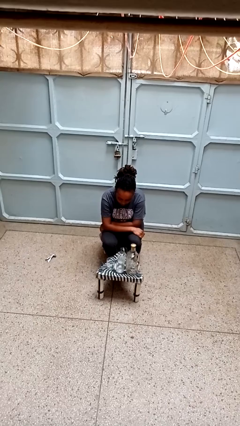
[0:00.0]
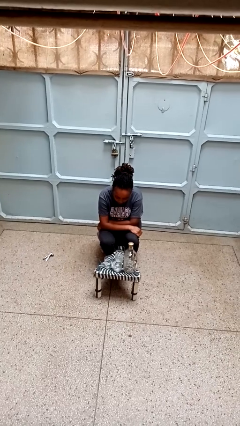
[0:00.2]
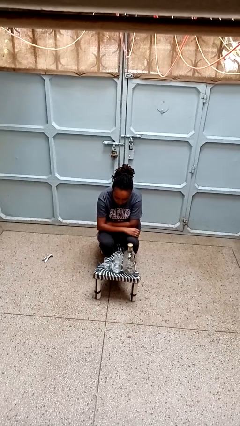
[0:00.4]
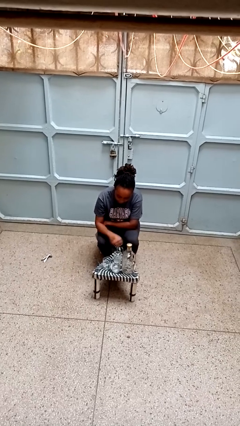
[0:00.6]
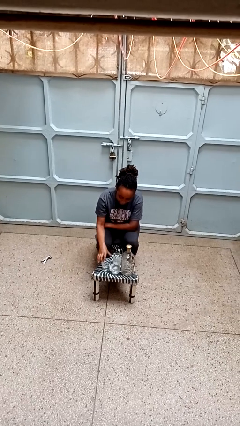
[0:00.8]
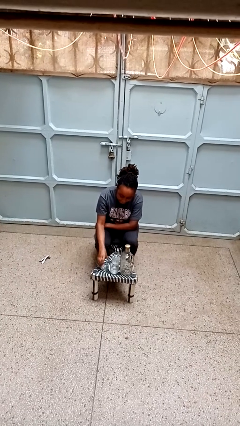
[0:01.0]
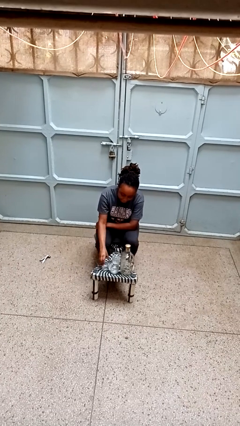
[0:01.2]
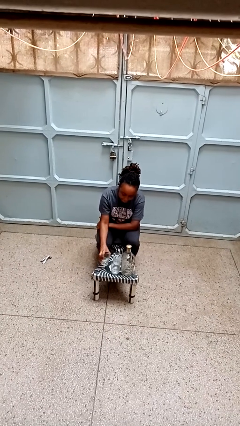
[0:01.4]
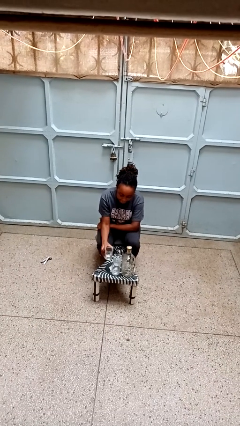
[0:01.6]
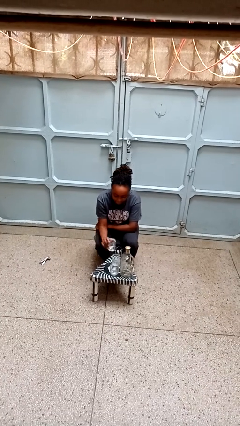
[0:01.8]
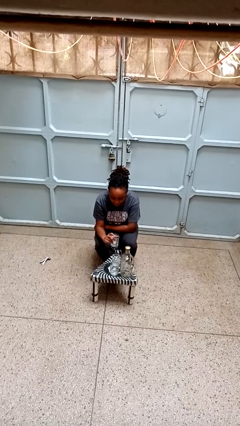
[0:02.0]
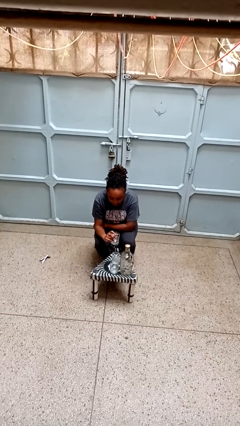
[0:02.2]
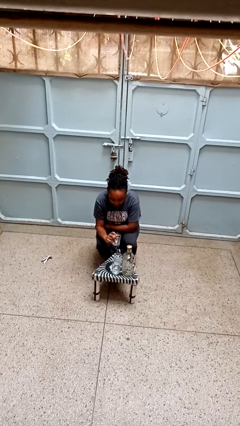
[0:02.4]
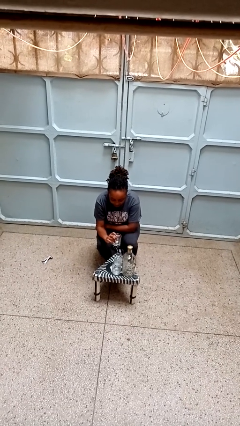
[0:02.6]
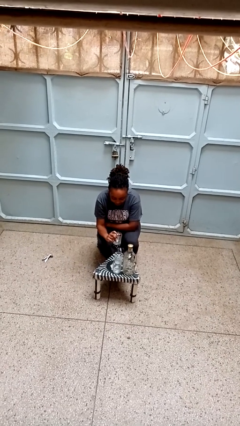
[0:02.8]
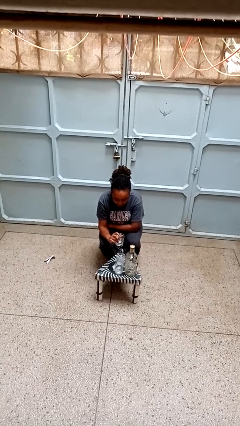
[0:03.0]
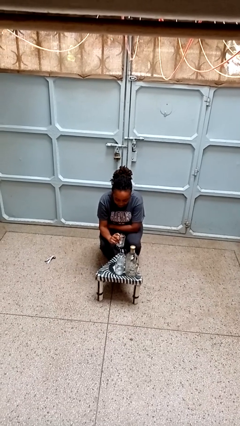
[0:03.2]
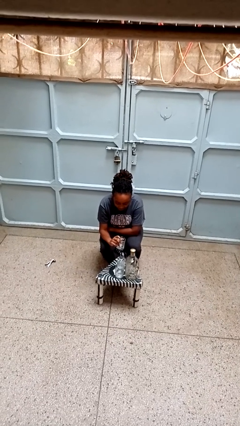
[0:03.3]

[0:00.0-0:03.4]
person picks up object from table

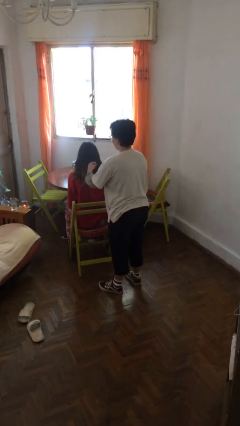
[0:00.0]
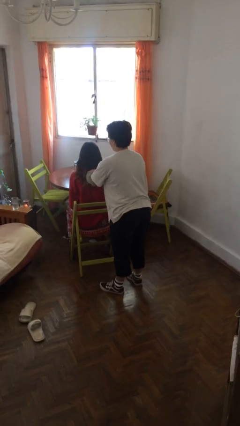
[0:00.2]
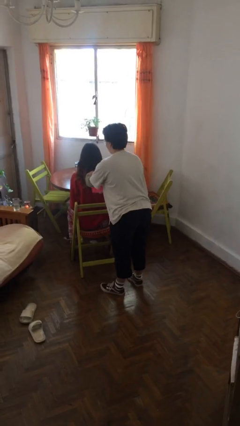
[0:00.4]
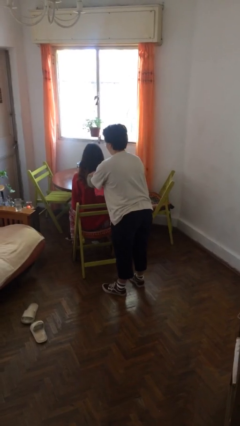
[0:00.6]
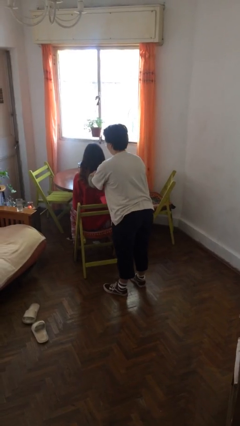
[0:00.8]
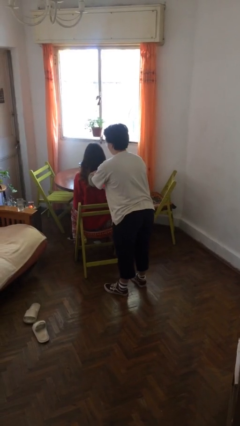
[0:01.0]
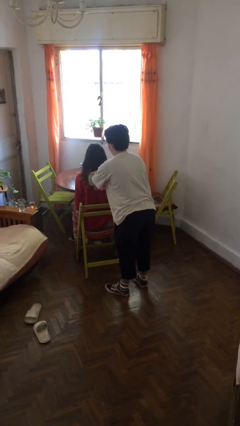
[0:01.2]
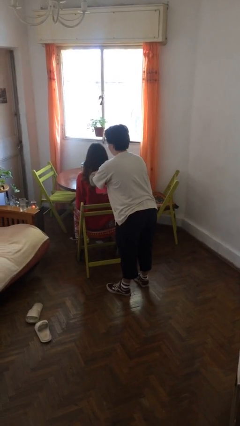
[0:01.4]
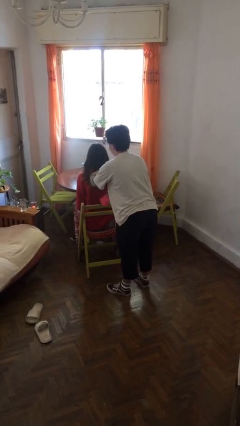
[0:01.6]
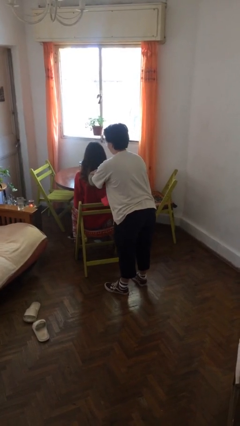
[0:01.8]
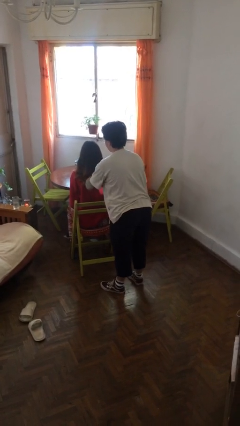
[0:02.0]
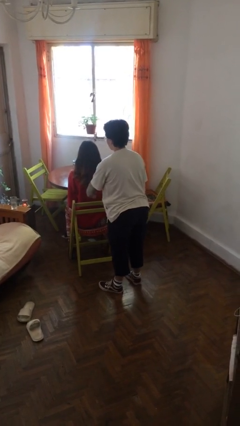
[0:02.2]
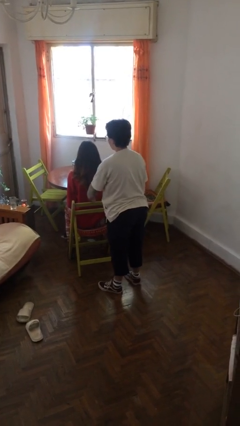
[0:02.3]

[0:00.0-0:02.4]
person brushes hair of person

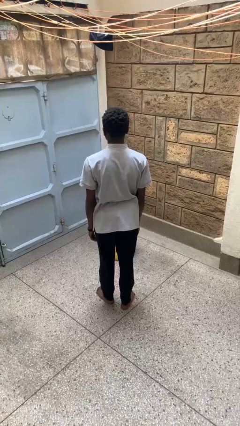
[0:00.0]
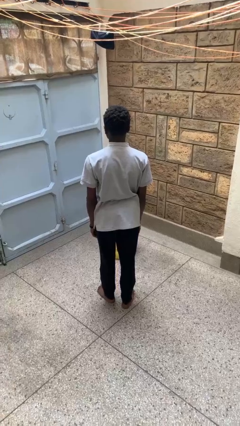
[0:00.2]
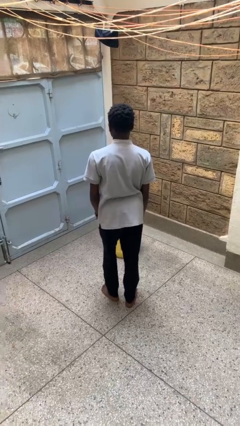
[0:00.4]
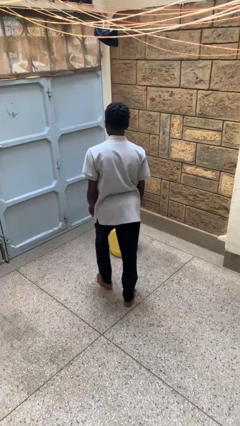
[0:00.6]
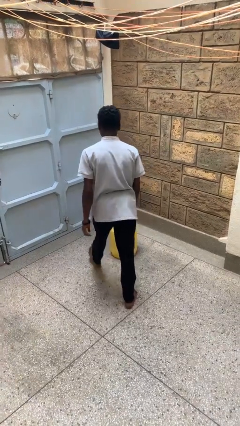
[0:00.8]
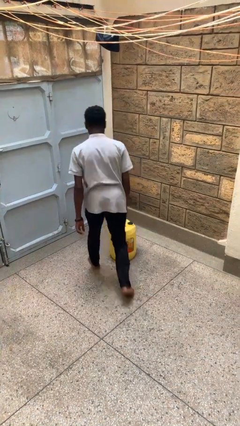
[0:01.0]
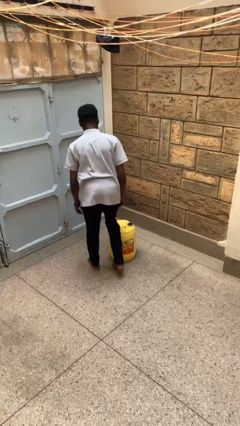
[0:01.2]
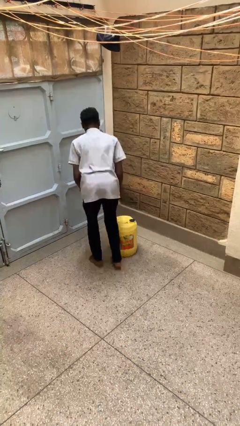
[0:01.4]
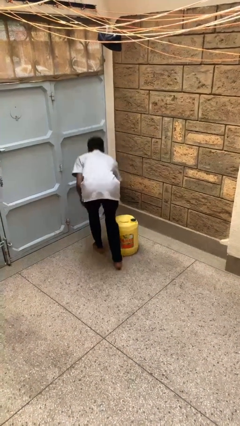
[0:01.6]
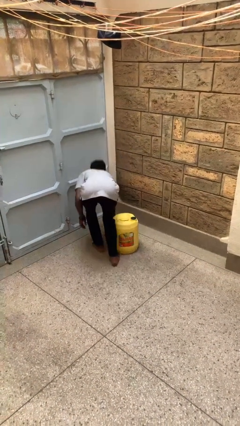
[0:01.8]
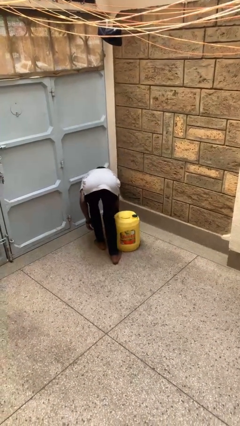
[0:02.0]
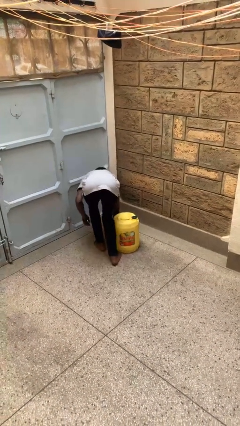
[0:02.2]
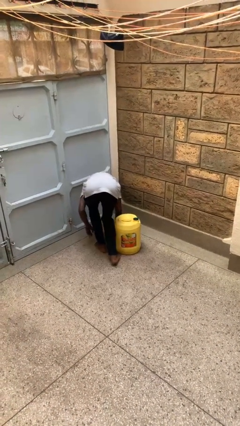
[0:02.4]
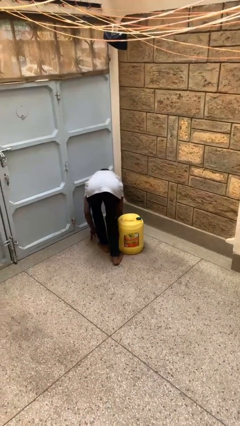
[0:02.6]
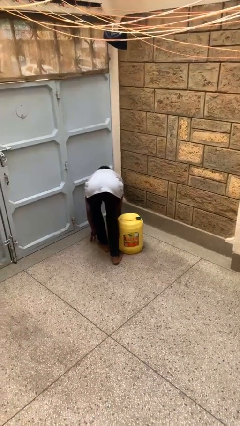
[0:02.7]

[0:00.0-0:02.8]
person trips on object on floor

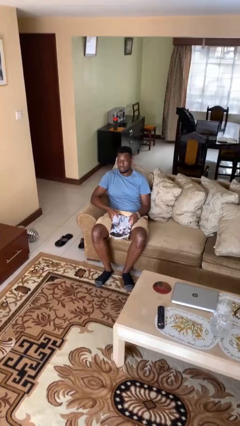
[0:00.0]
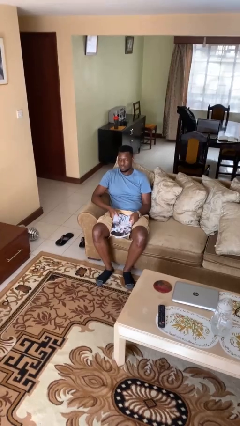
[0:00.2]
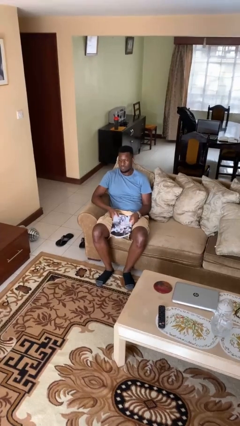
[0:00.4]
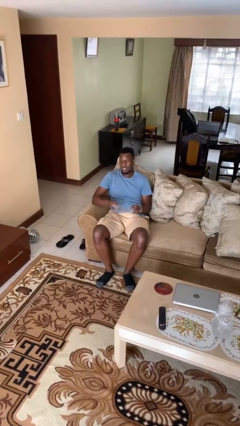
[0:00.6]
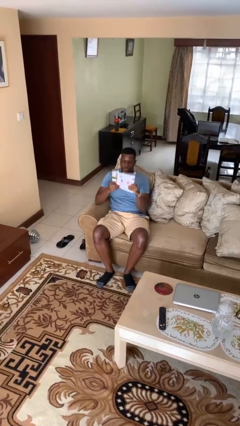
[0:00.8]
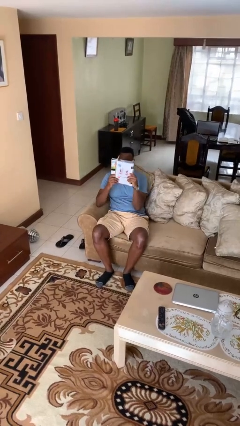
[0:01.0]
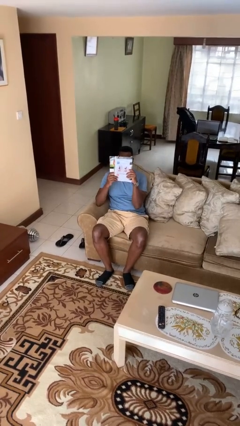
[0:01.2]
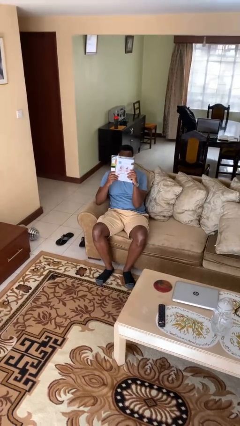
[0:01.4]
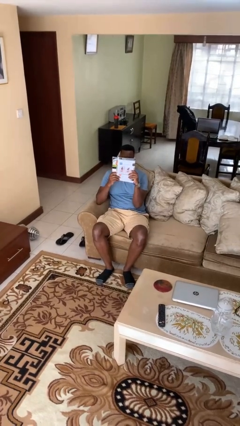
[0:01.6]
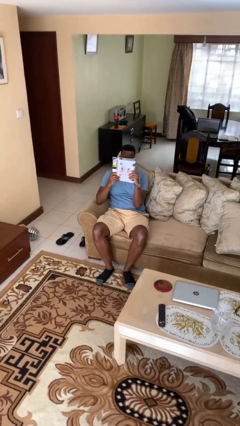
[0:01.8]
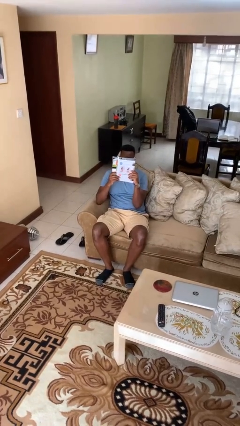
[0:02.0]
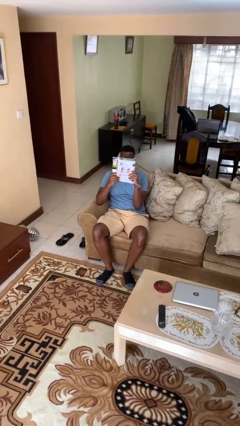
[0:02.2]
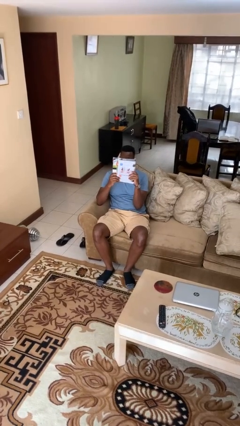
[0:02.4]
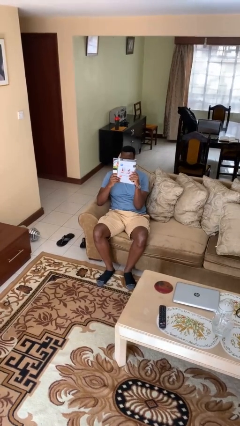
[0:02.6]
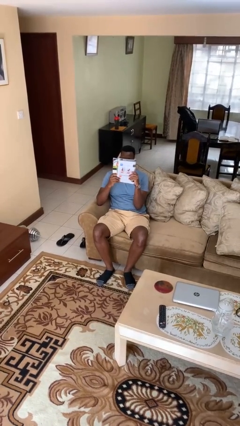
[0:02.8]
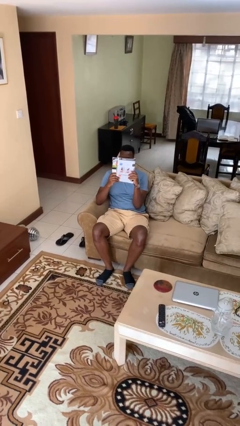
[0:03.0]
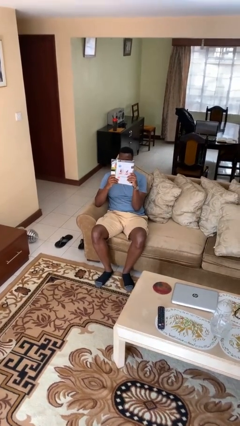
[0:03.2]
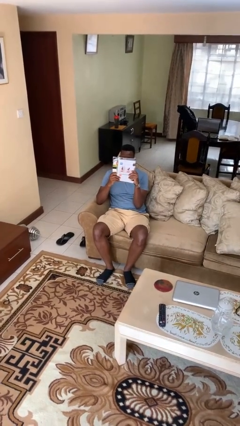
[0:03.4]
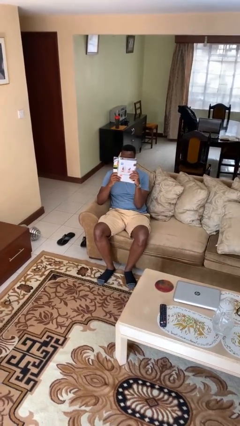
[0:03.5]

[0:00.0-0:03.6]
person reads document

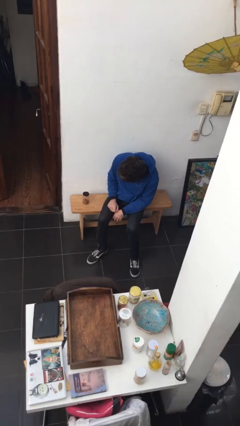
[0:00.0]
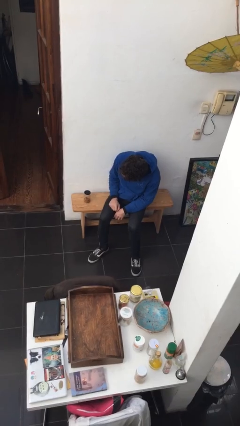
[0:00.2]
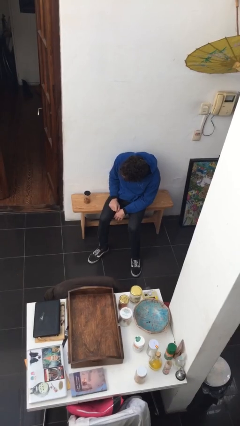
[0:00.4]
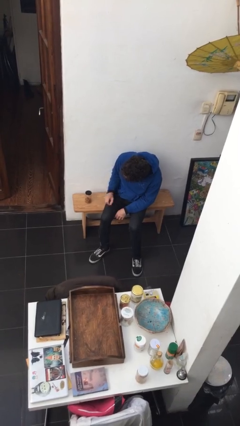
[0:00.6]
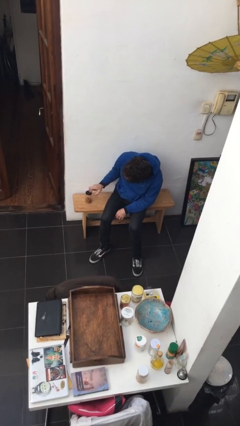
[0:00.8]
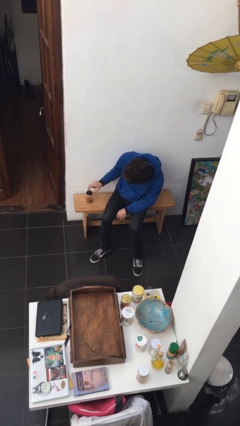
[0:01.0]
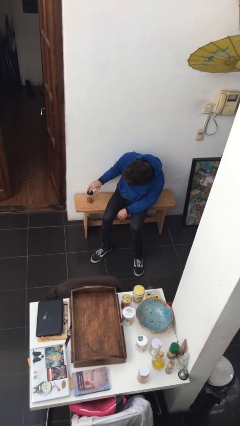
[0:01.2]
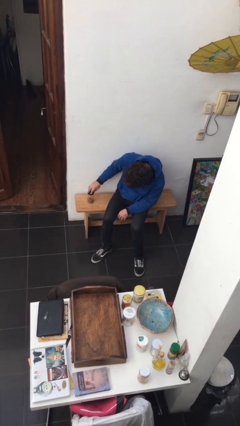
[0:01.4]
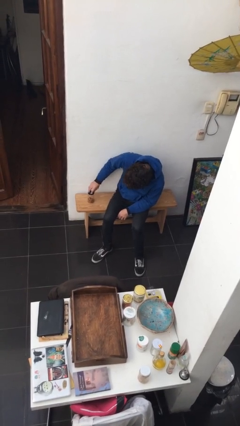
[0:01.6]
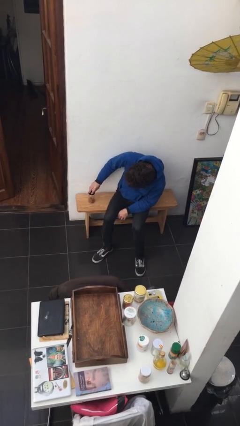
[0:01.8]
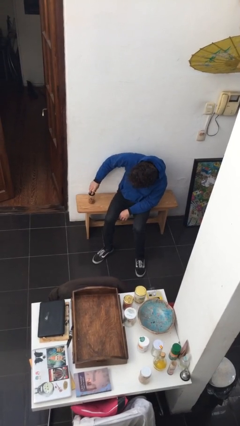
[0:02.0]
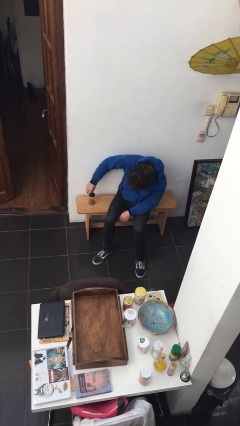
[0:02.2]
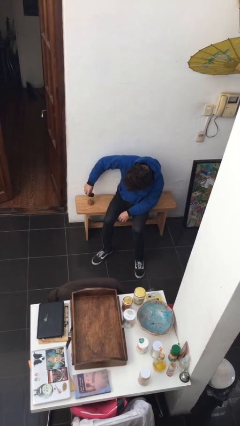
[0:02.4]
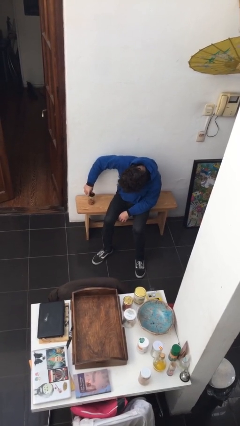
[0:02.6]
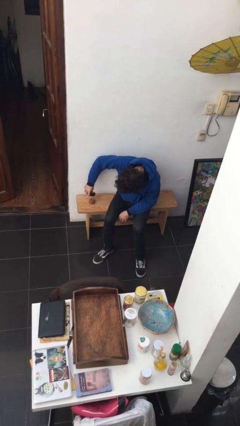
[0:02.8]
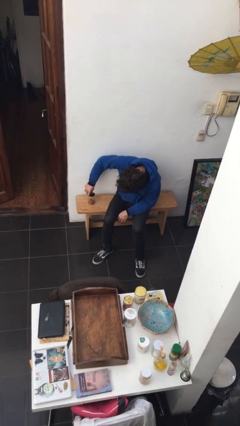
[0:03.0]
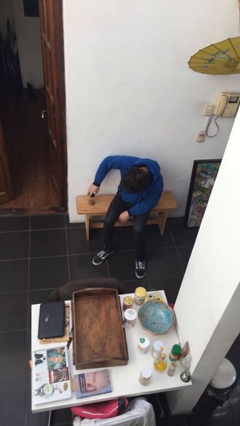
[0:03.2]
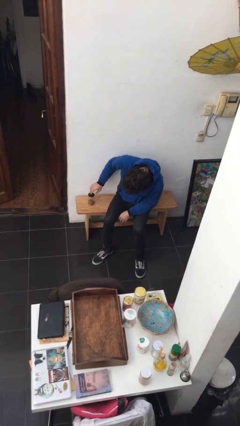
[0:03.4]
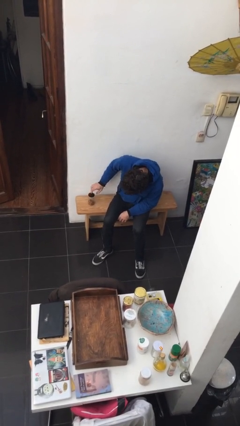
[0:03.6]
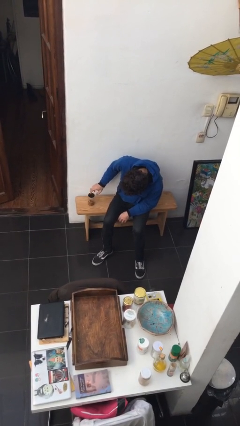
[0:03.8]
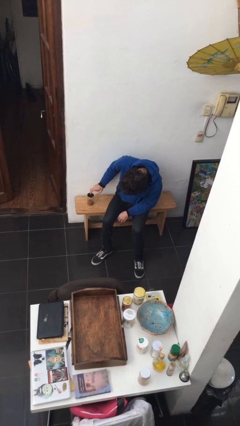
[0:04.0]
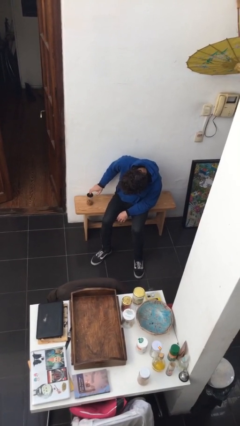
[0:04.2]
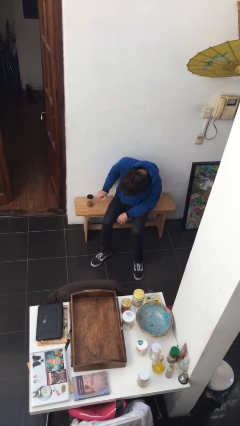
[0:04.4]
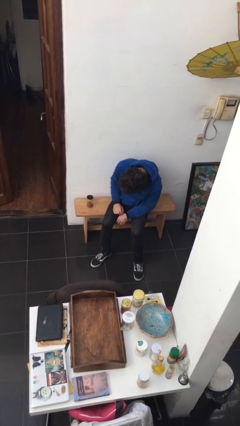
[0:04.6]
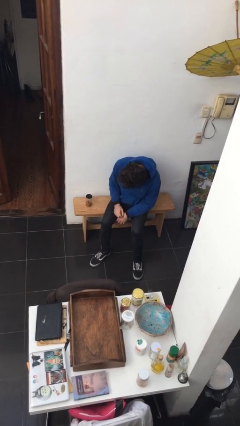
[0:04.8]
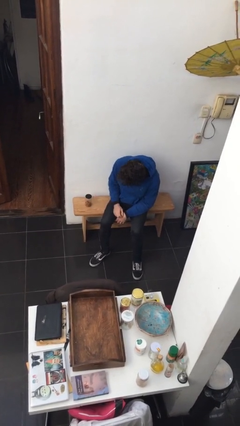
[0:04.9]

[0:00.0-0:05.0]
person taps object with finger

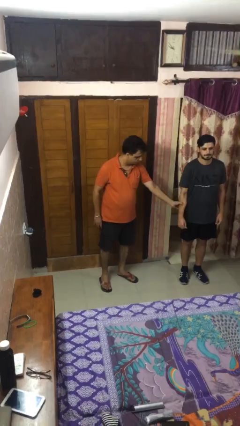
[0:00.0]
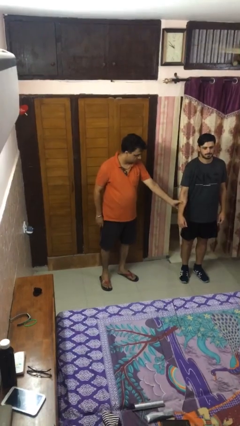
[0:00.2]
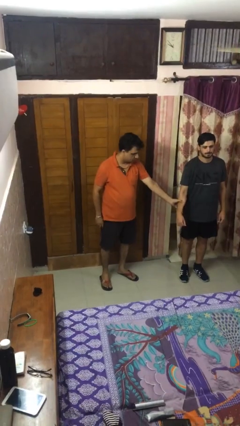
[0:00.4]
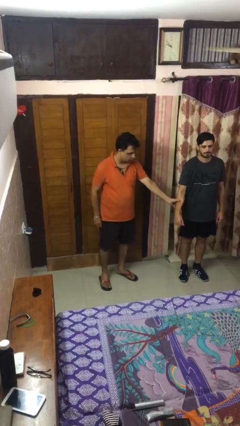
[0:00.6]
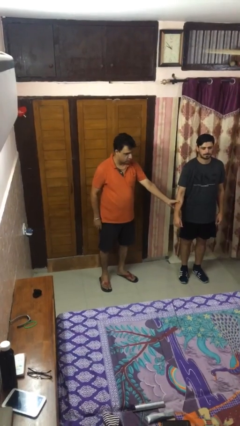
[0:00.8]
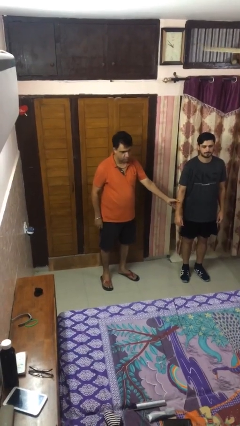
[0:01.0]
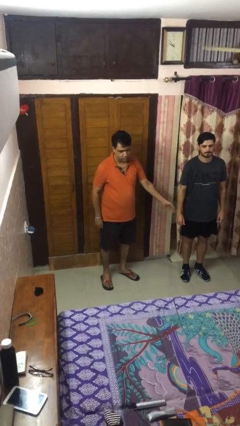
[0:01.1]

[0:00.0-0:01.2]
person grabs person by forearm
